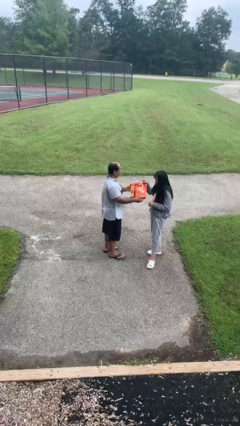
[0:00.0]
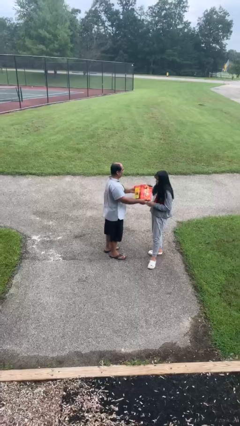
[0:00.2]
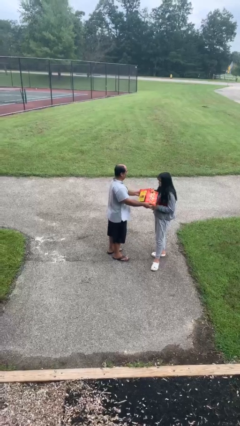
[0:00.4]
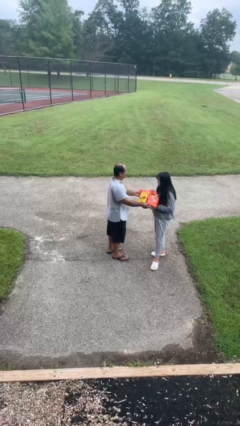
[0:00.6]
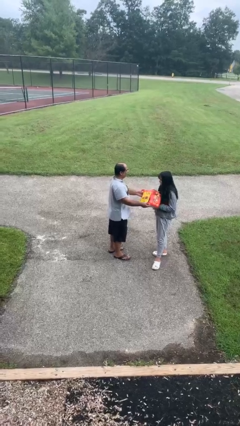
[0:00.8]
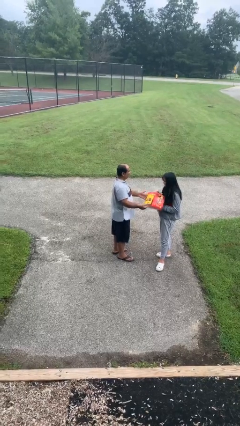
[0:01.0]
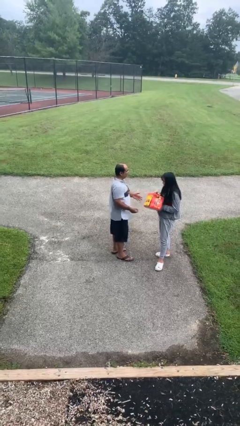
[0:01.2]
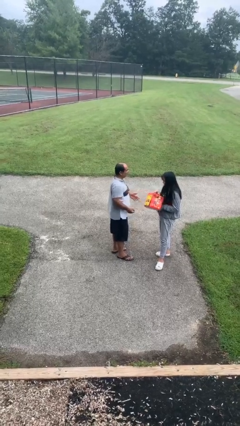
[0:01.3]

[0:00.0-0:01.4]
person transfers object to person

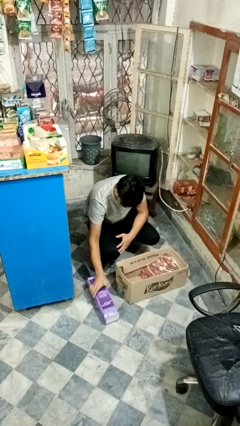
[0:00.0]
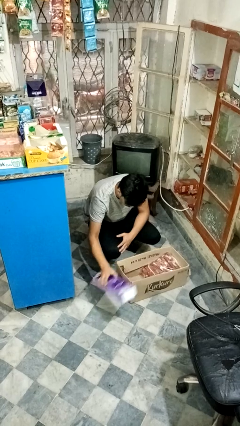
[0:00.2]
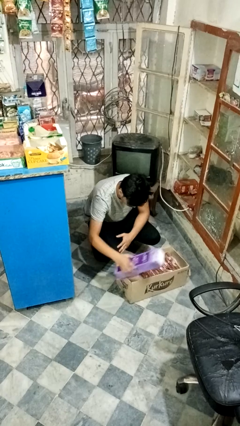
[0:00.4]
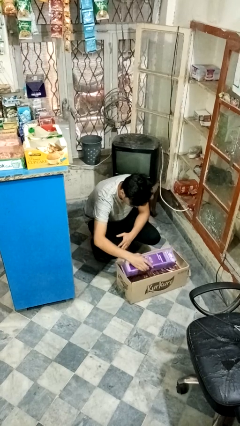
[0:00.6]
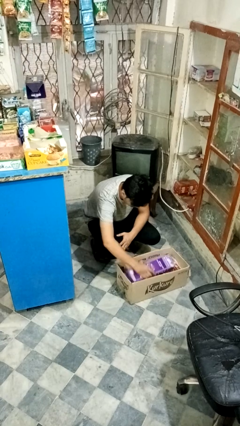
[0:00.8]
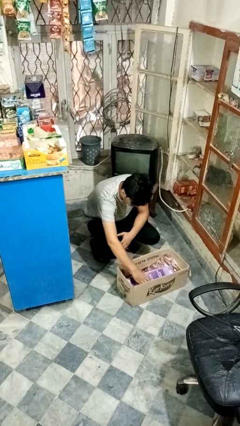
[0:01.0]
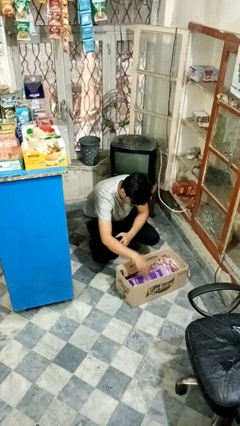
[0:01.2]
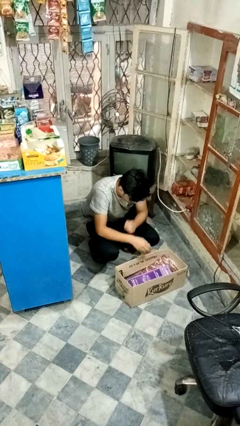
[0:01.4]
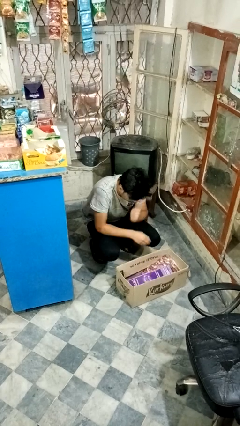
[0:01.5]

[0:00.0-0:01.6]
person puts object into box

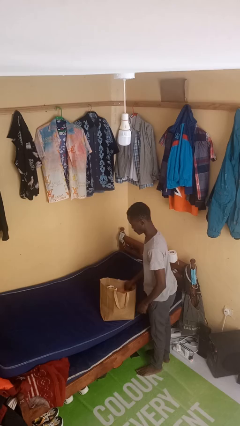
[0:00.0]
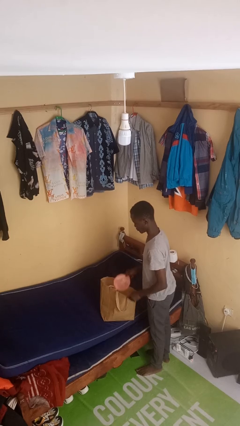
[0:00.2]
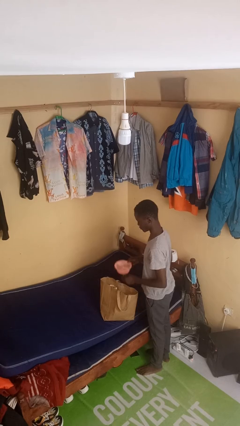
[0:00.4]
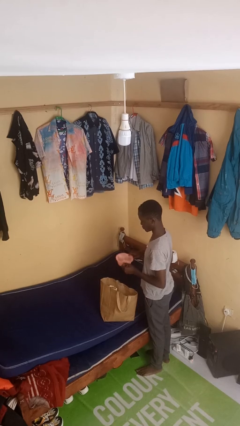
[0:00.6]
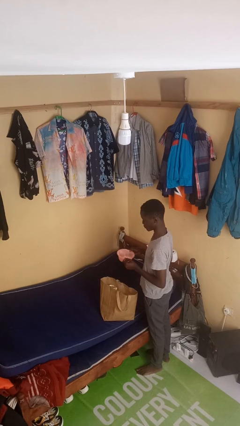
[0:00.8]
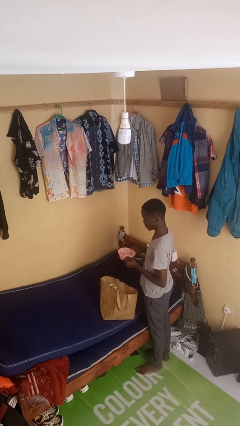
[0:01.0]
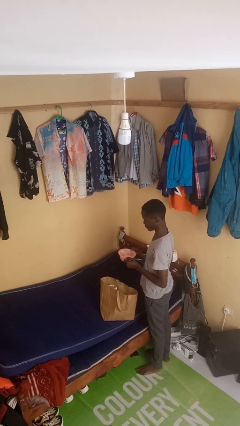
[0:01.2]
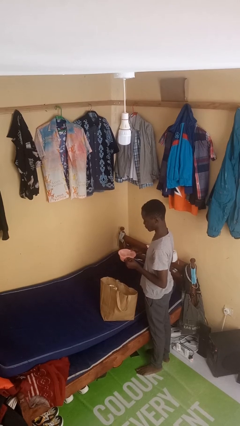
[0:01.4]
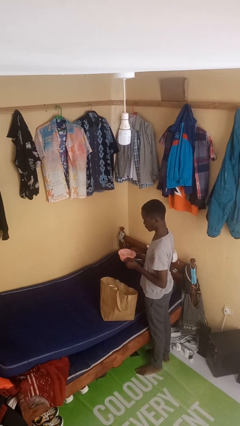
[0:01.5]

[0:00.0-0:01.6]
person takes object from bag

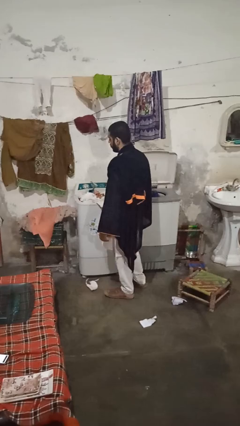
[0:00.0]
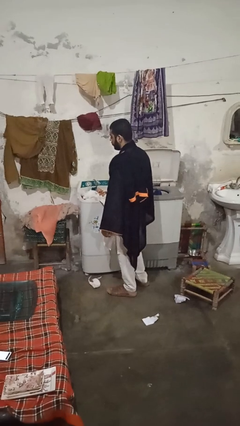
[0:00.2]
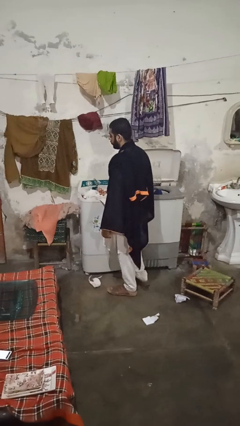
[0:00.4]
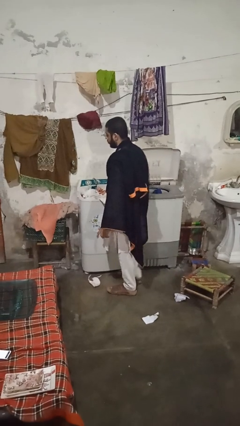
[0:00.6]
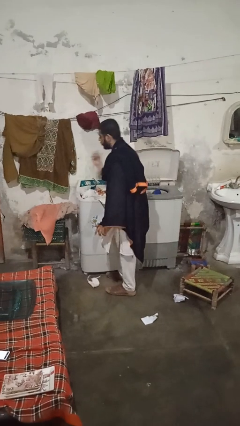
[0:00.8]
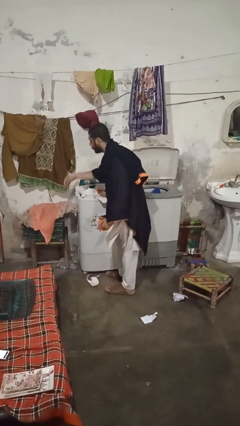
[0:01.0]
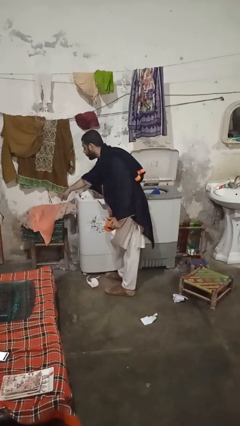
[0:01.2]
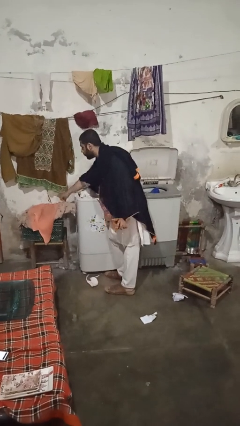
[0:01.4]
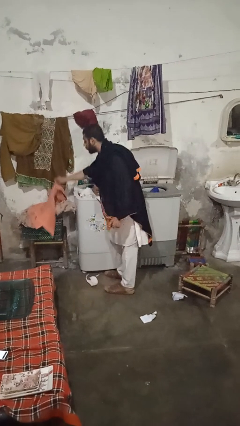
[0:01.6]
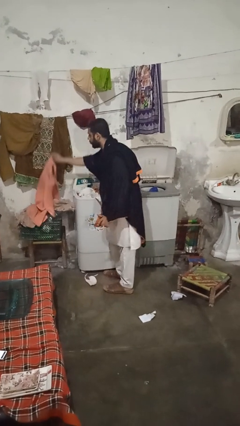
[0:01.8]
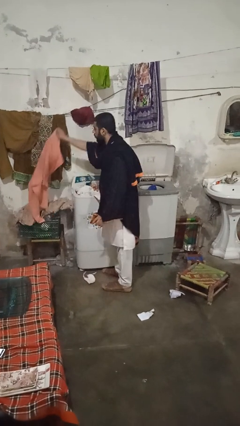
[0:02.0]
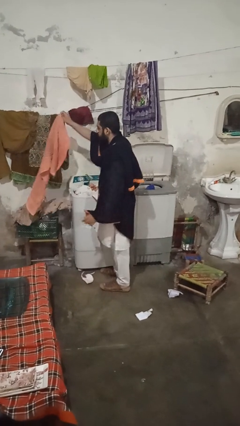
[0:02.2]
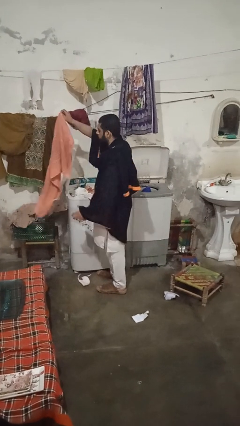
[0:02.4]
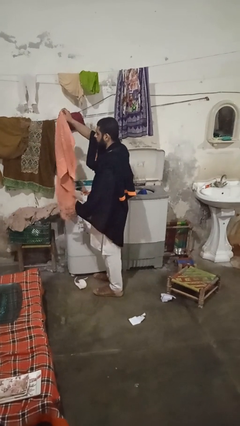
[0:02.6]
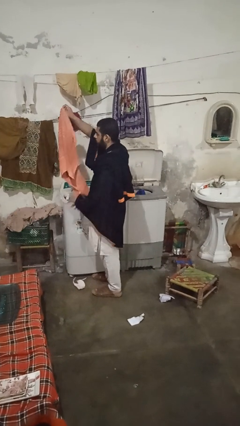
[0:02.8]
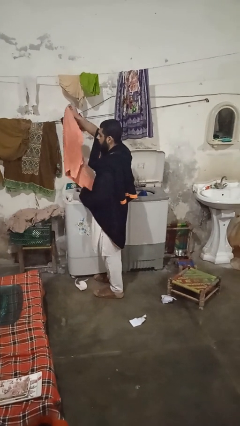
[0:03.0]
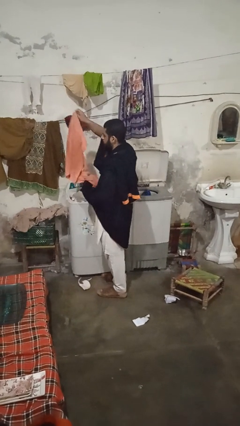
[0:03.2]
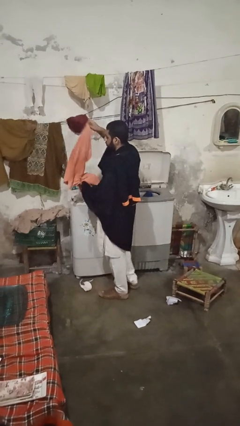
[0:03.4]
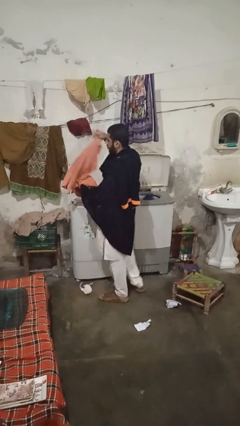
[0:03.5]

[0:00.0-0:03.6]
person loads clotheswasher

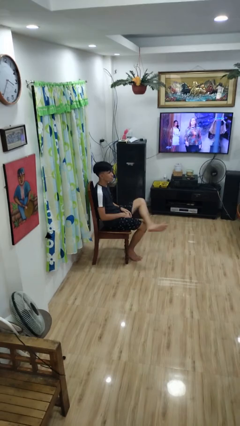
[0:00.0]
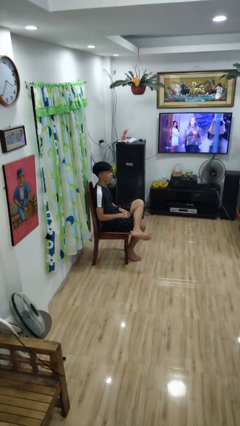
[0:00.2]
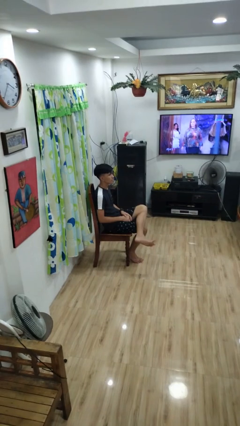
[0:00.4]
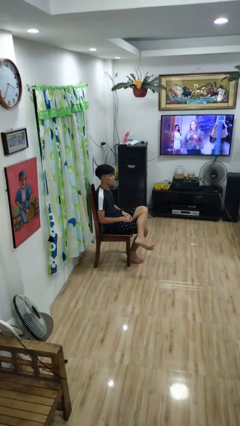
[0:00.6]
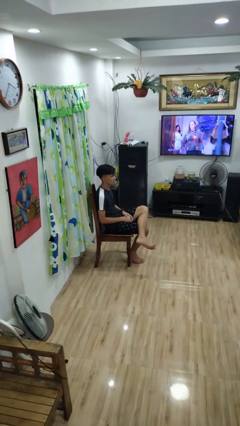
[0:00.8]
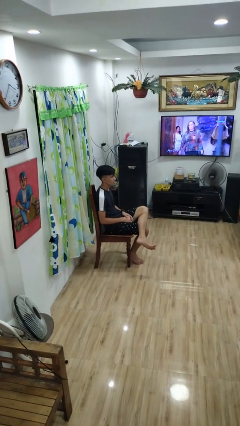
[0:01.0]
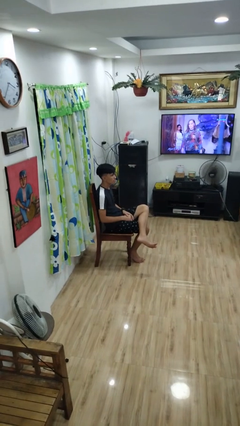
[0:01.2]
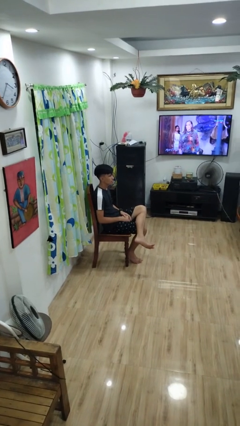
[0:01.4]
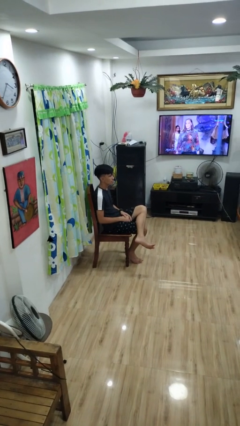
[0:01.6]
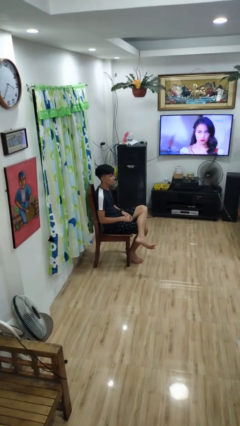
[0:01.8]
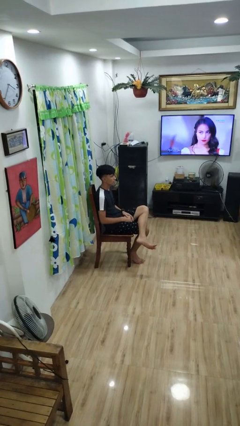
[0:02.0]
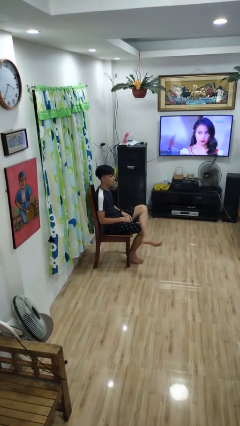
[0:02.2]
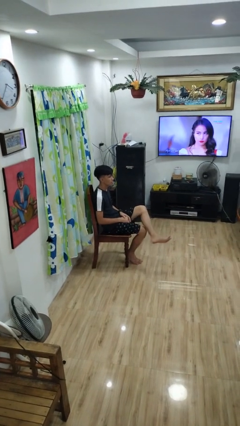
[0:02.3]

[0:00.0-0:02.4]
person crosses legs

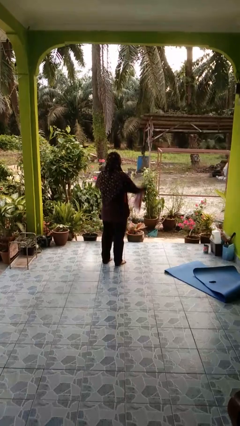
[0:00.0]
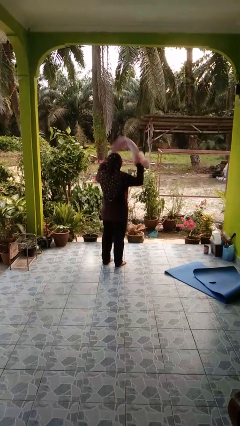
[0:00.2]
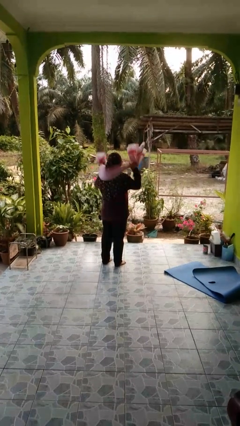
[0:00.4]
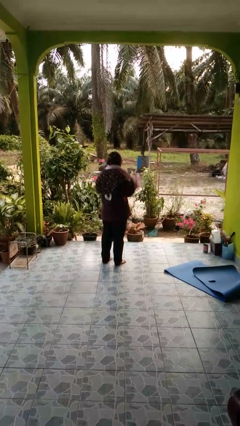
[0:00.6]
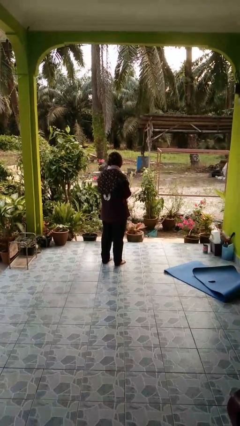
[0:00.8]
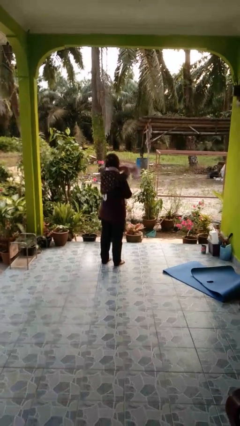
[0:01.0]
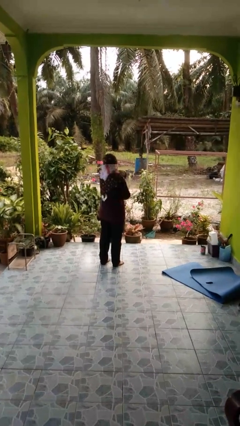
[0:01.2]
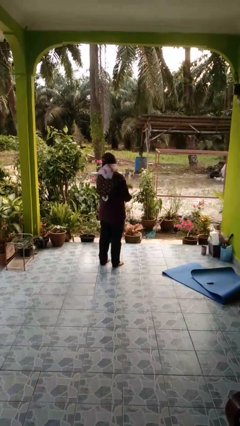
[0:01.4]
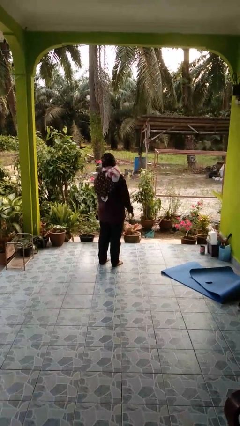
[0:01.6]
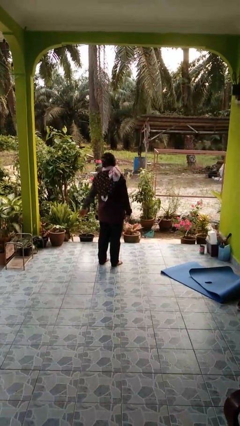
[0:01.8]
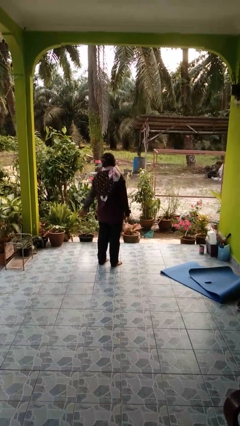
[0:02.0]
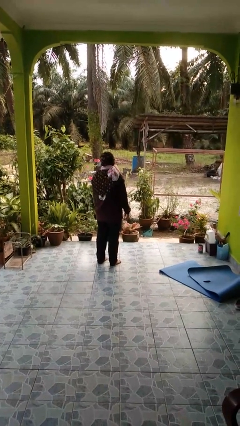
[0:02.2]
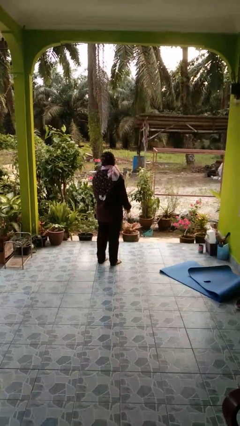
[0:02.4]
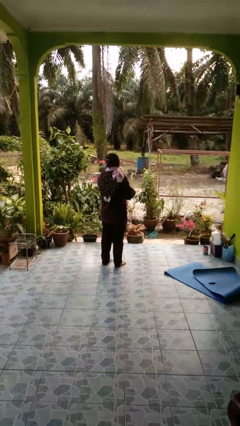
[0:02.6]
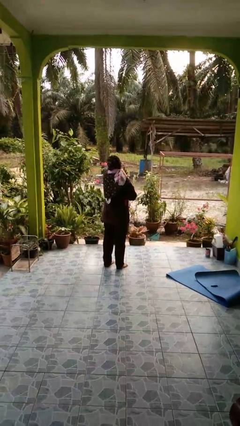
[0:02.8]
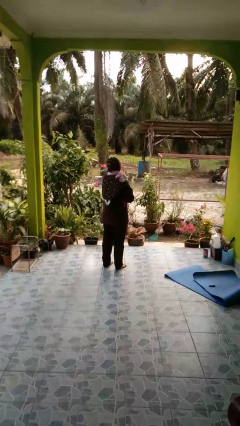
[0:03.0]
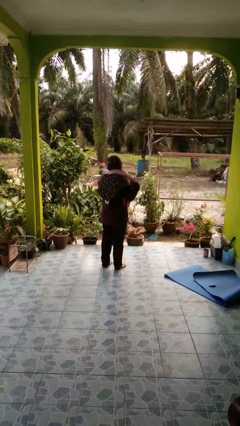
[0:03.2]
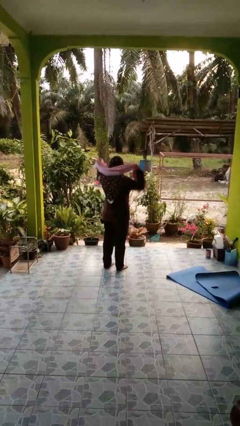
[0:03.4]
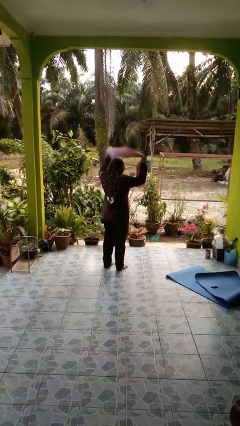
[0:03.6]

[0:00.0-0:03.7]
person puts on scarf

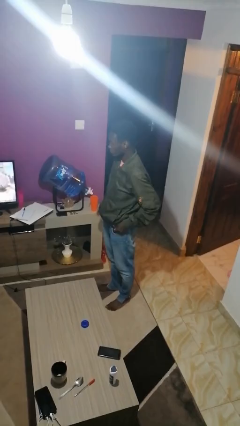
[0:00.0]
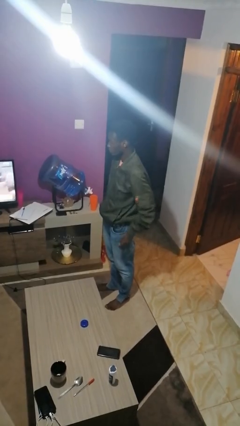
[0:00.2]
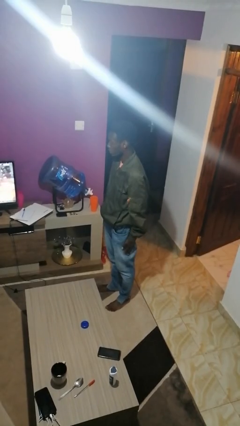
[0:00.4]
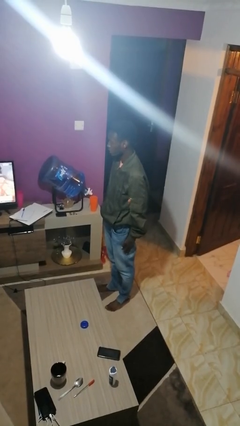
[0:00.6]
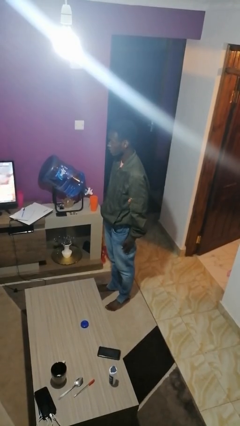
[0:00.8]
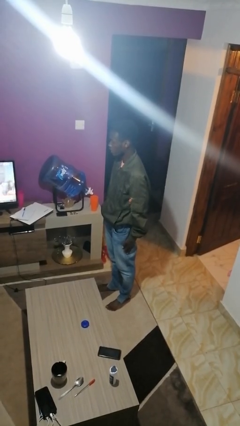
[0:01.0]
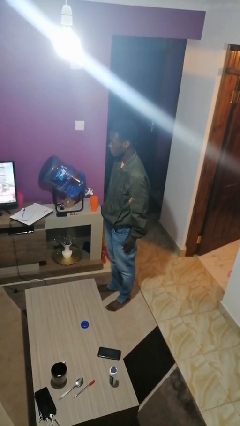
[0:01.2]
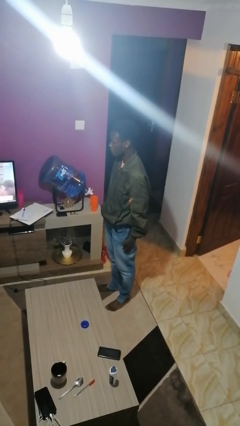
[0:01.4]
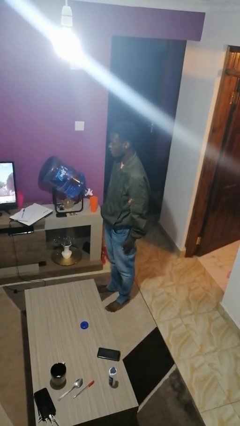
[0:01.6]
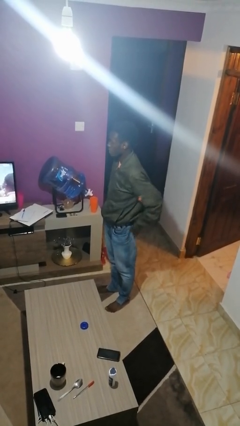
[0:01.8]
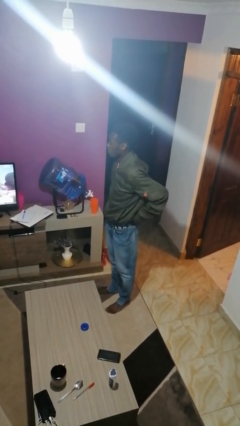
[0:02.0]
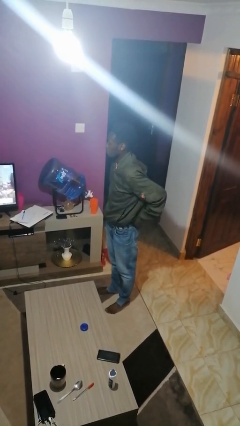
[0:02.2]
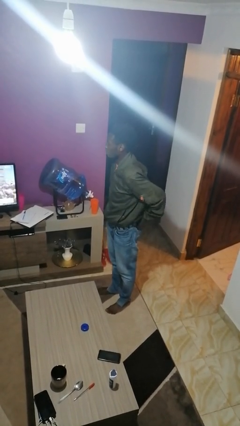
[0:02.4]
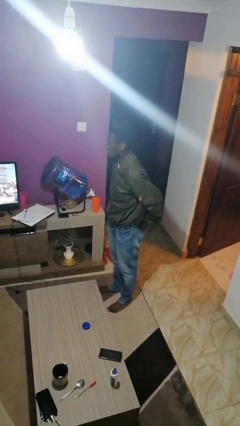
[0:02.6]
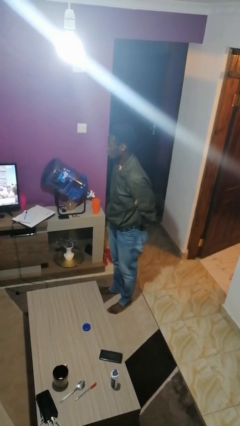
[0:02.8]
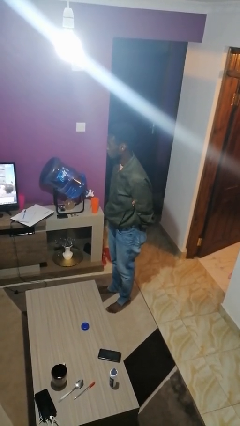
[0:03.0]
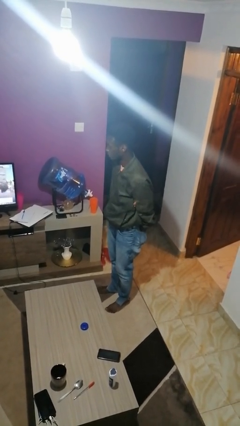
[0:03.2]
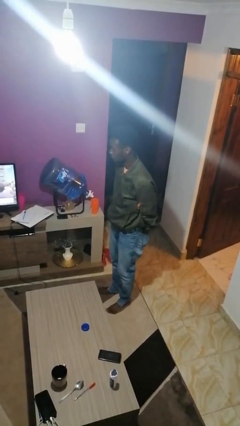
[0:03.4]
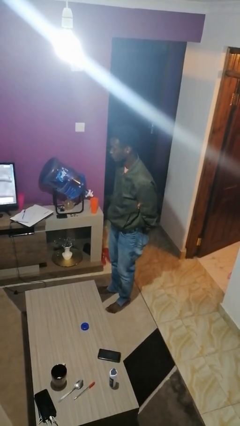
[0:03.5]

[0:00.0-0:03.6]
person puts hands in back pockets
